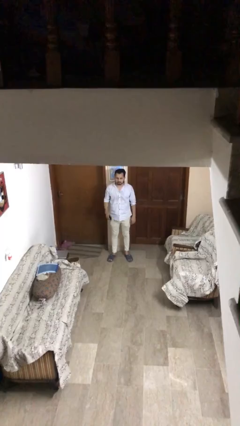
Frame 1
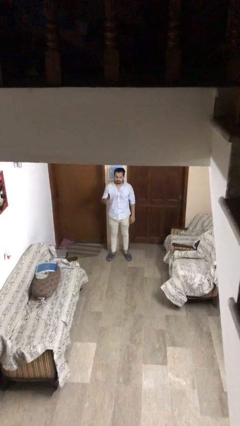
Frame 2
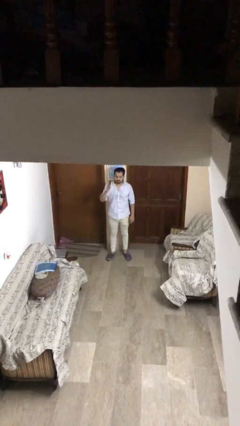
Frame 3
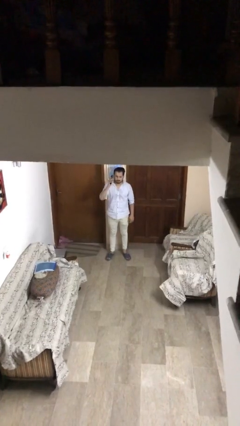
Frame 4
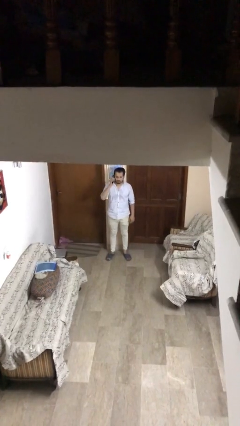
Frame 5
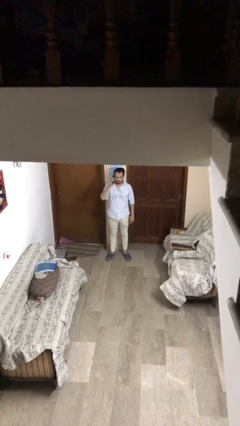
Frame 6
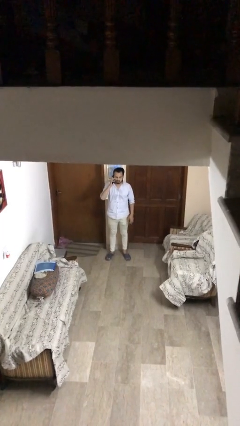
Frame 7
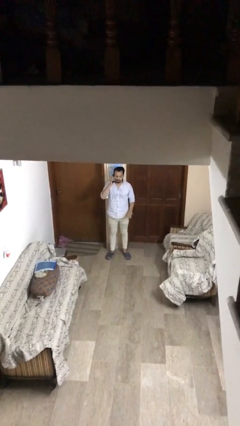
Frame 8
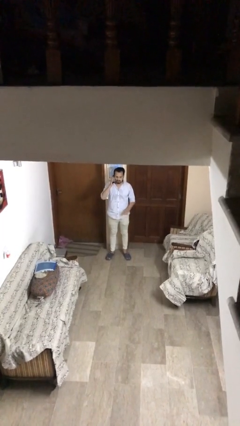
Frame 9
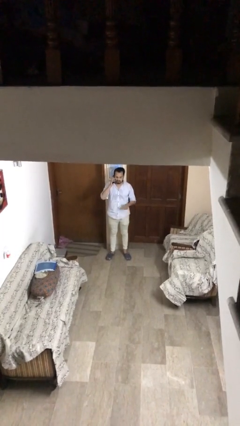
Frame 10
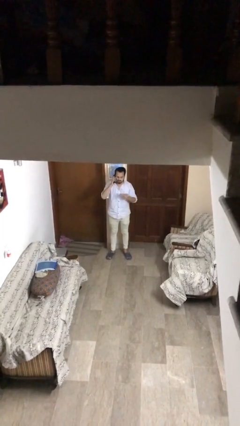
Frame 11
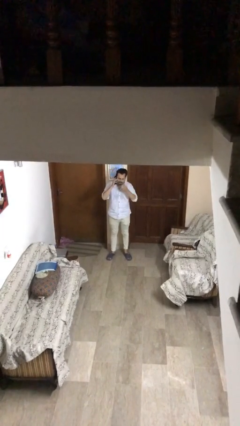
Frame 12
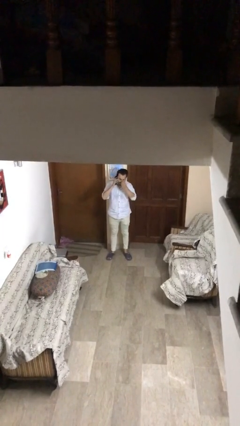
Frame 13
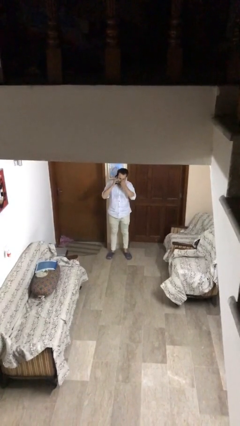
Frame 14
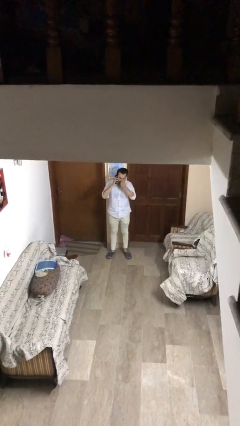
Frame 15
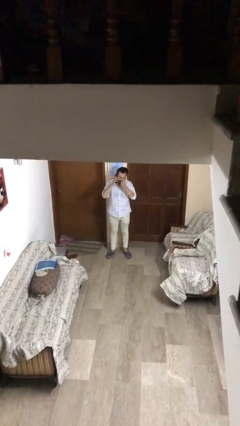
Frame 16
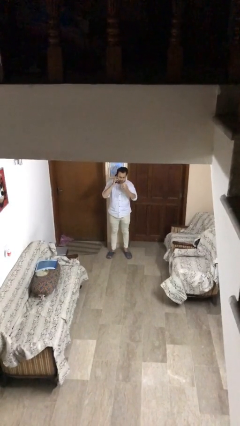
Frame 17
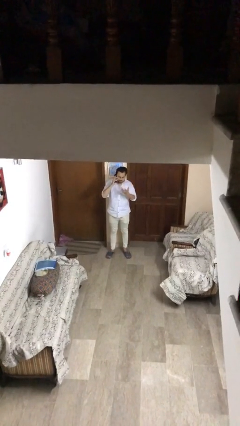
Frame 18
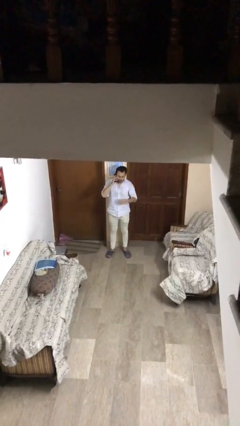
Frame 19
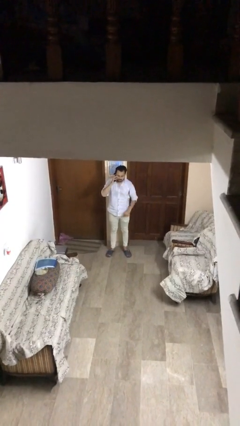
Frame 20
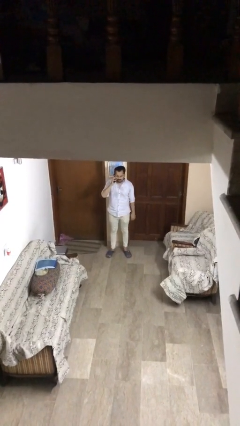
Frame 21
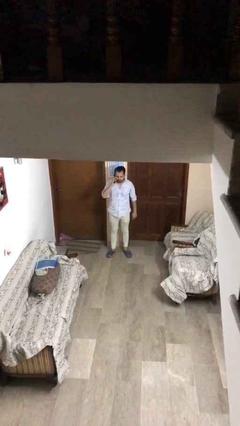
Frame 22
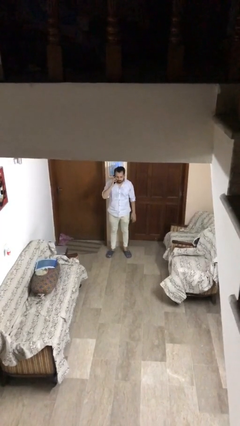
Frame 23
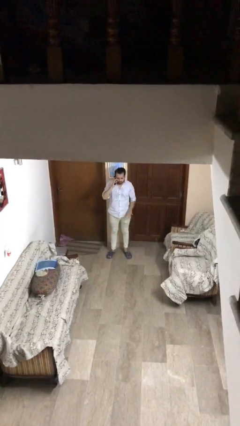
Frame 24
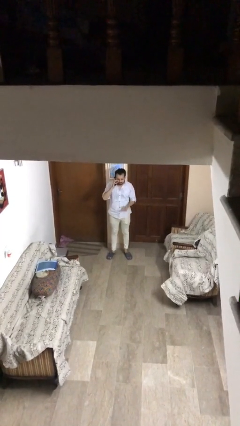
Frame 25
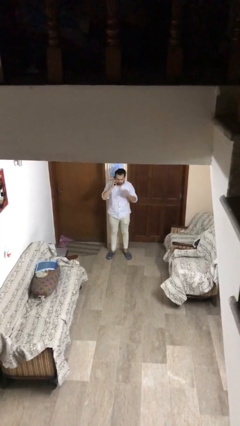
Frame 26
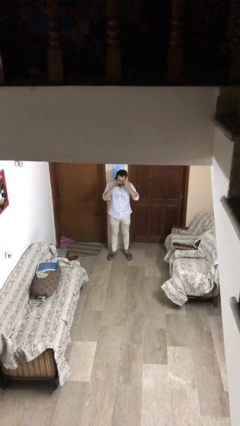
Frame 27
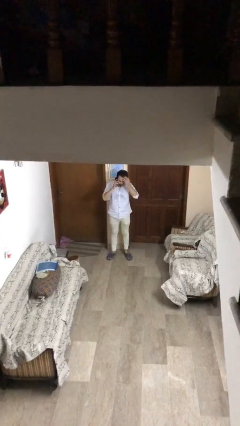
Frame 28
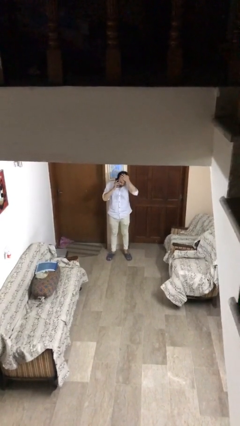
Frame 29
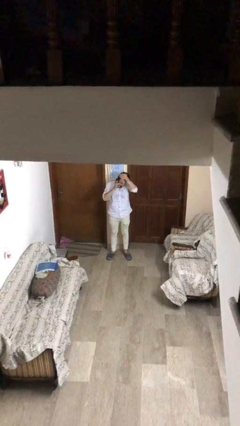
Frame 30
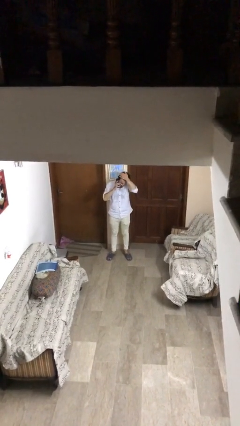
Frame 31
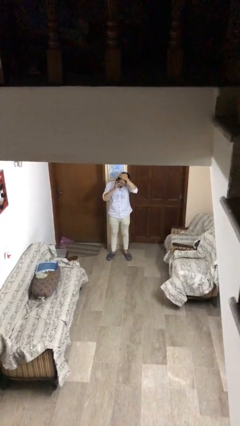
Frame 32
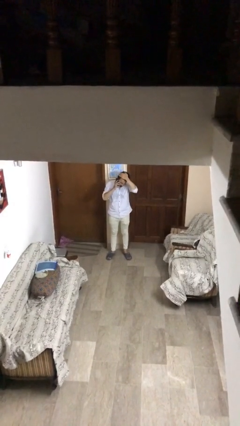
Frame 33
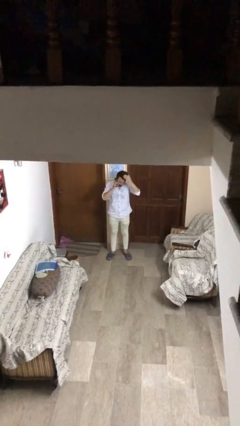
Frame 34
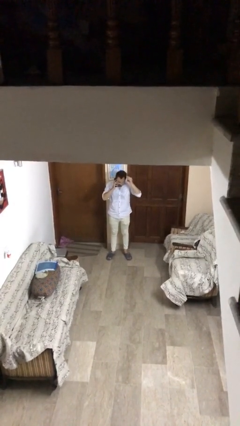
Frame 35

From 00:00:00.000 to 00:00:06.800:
person talks on phone

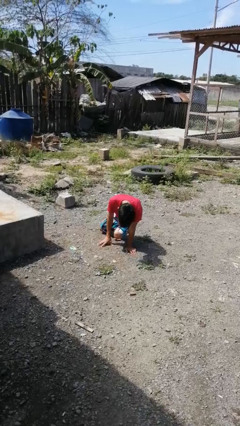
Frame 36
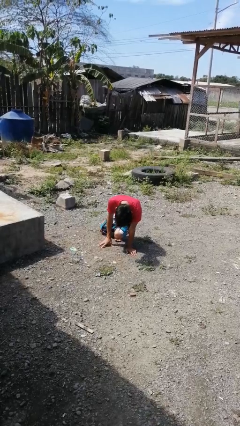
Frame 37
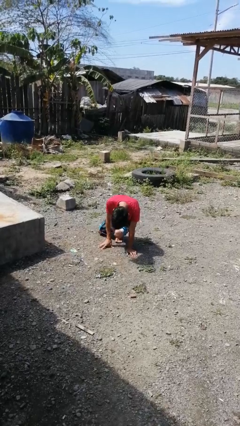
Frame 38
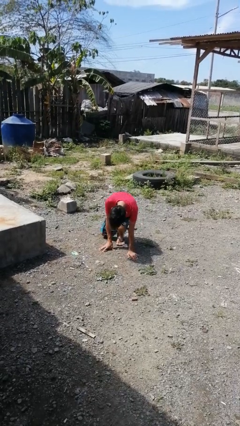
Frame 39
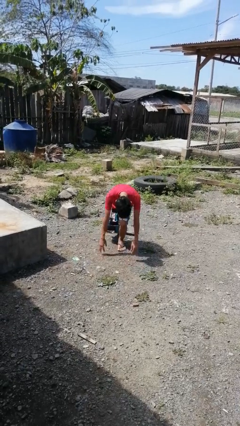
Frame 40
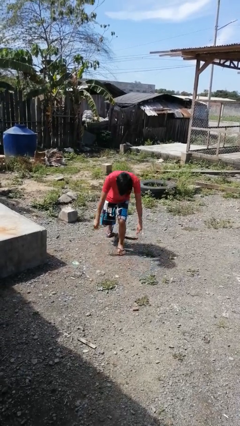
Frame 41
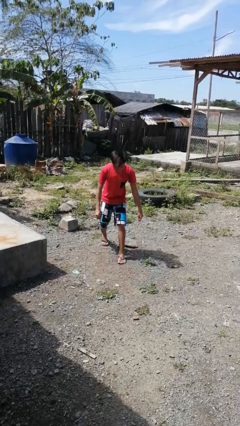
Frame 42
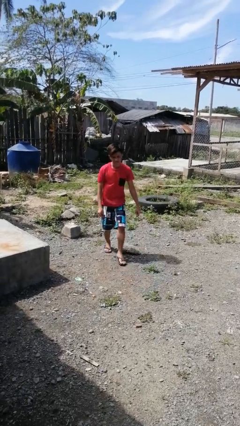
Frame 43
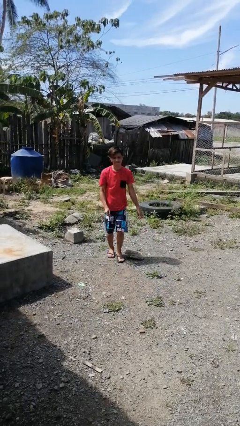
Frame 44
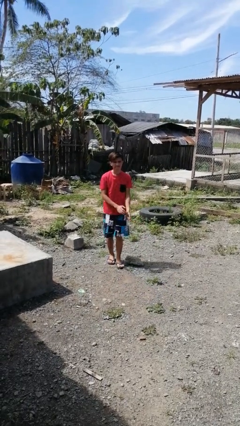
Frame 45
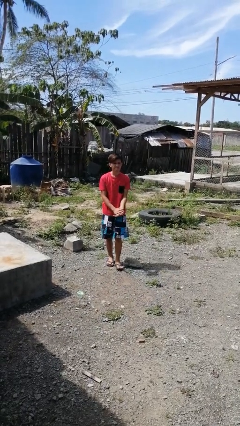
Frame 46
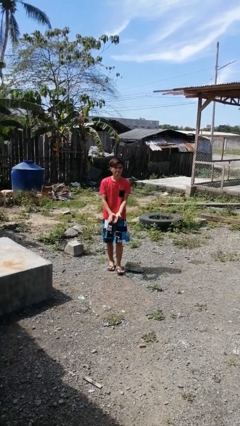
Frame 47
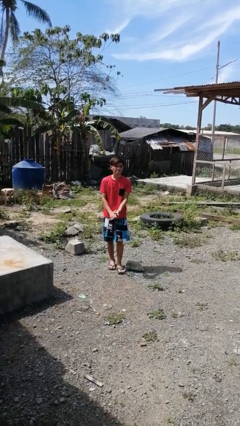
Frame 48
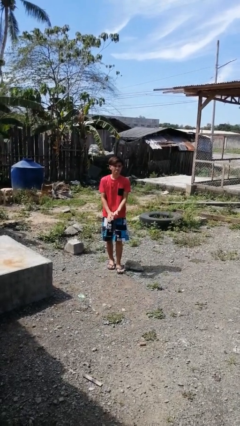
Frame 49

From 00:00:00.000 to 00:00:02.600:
person stands up from floor

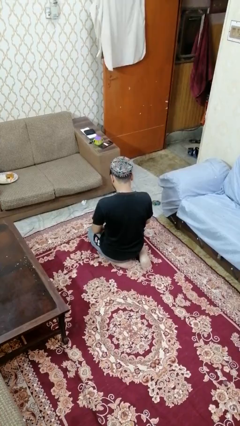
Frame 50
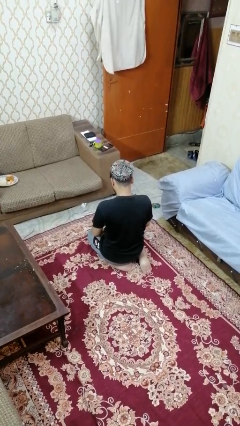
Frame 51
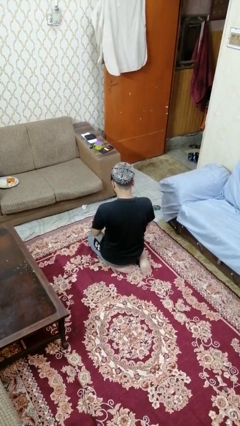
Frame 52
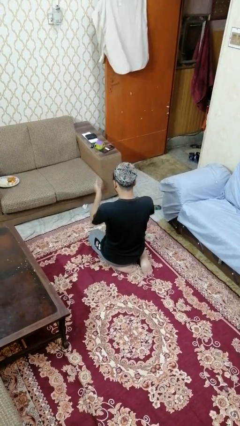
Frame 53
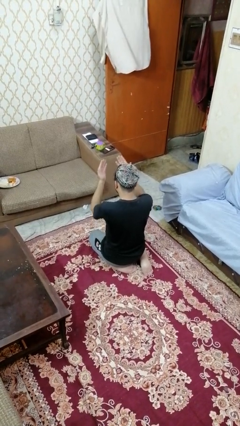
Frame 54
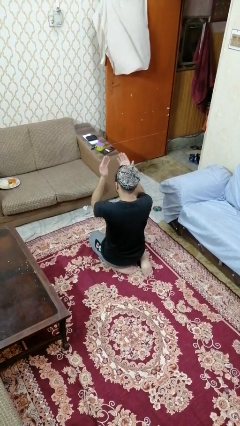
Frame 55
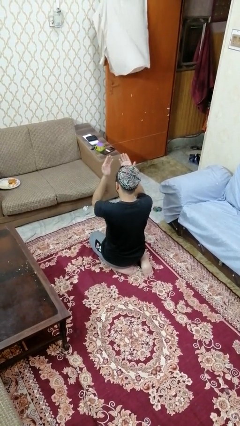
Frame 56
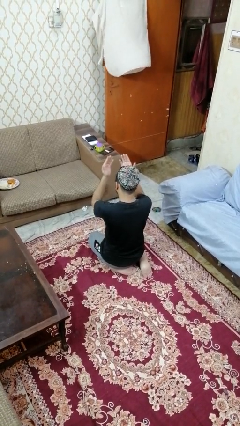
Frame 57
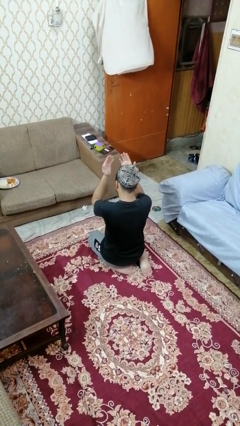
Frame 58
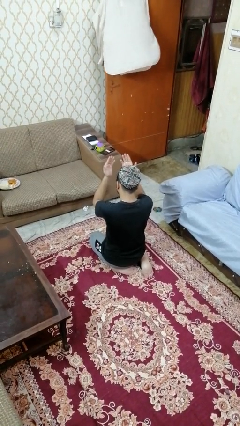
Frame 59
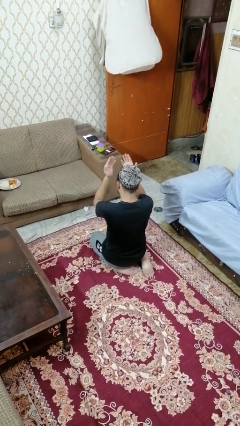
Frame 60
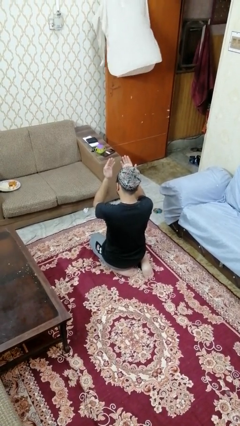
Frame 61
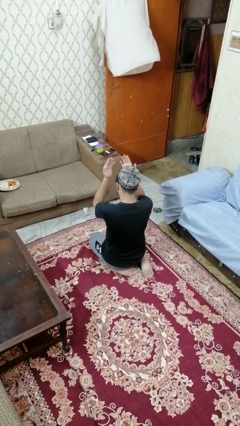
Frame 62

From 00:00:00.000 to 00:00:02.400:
person prays

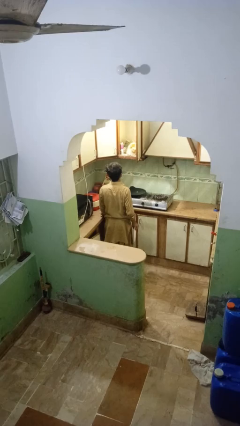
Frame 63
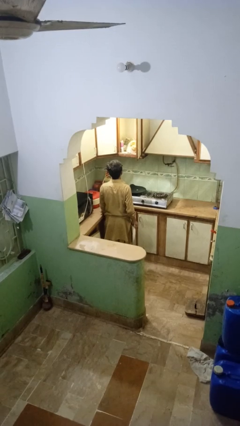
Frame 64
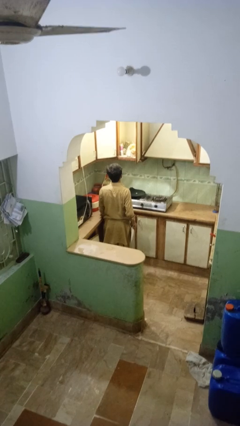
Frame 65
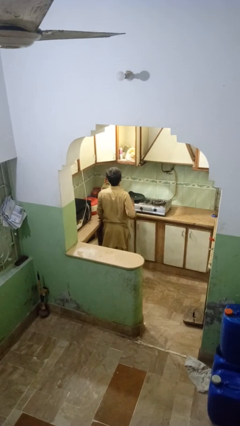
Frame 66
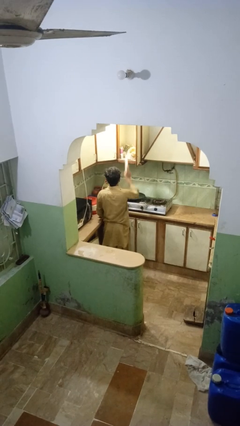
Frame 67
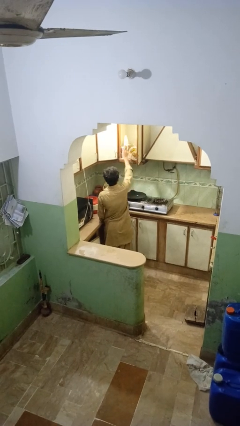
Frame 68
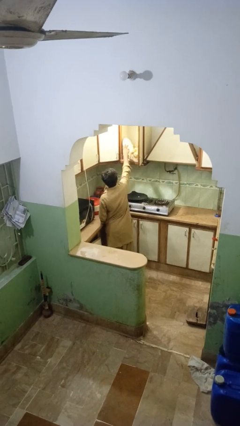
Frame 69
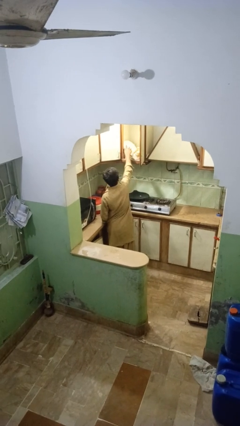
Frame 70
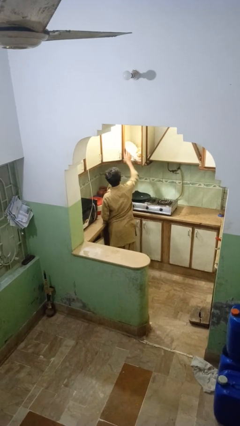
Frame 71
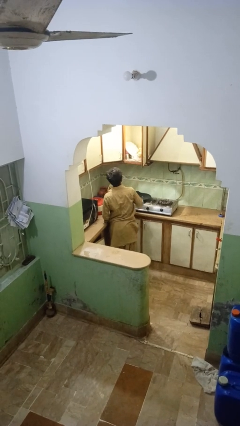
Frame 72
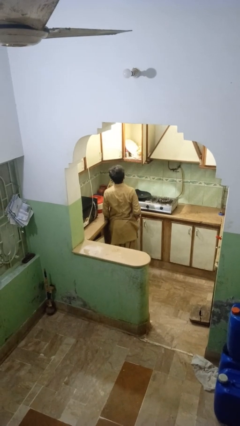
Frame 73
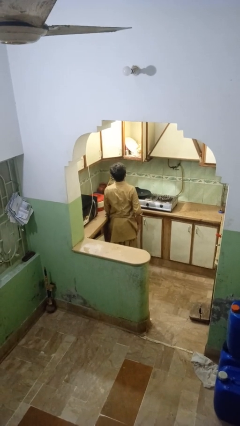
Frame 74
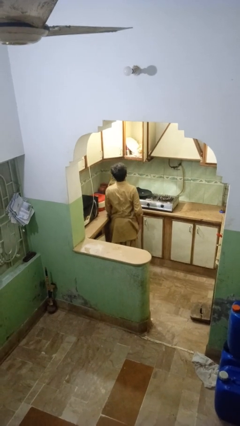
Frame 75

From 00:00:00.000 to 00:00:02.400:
person puts object in cabinet

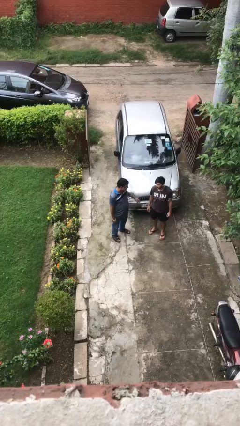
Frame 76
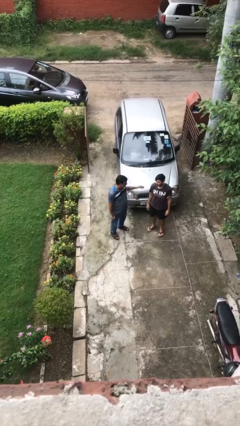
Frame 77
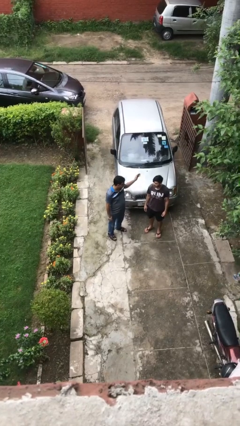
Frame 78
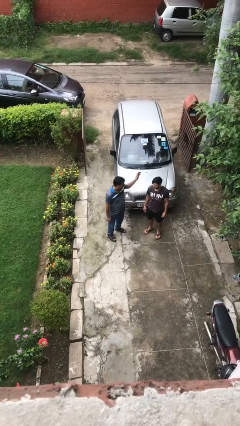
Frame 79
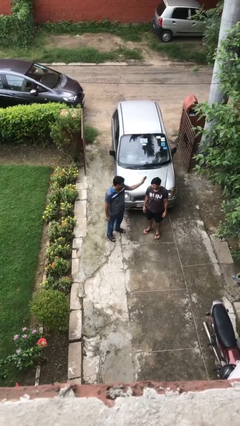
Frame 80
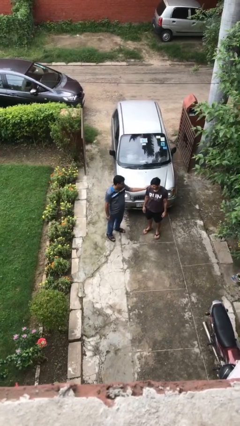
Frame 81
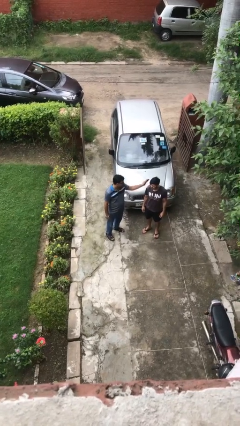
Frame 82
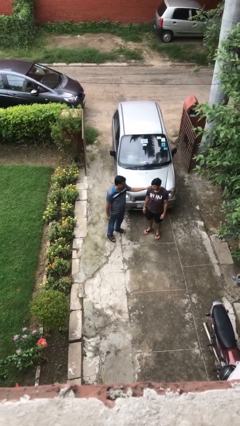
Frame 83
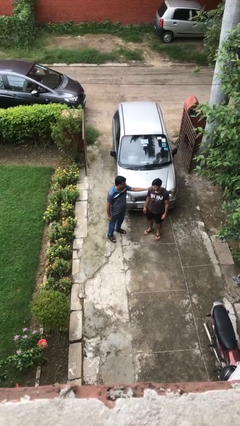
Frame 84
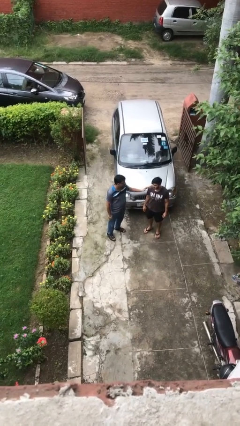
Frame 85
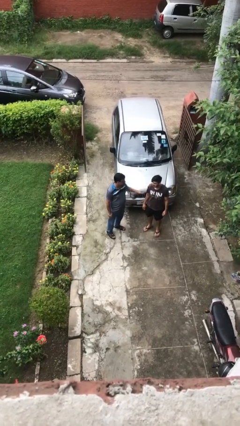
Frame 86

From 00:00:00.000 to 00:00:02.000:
person pounds shoulders of person

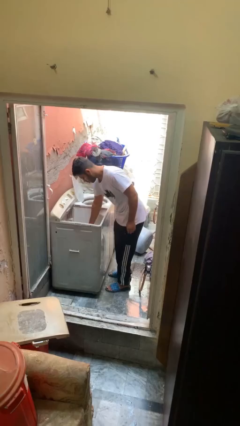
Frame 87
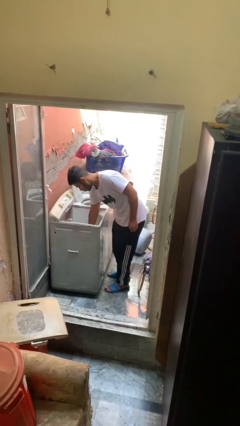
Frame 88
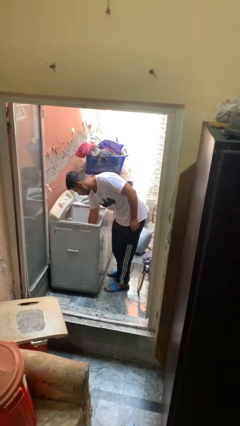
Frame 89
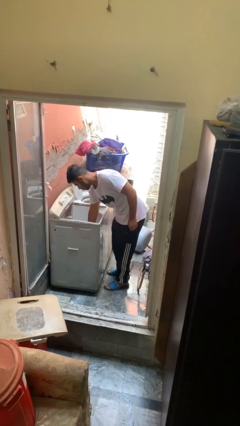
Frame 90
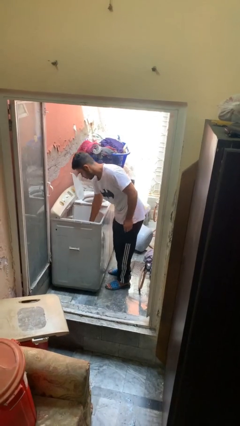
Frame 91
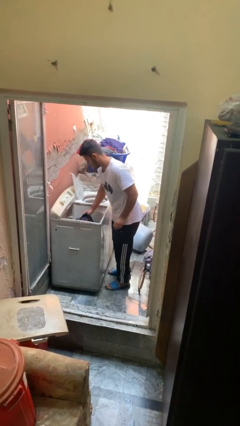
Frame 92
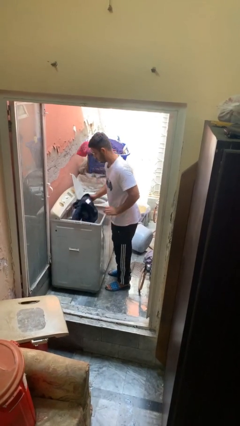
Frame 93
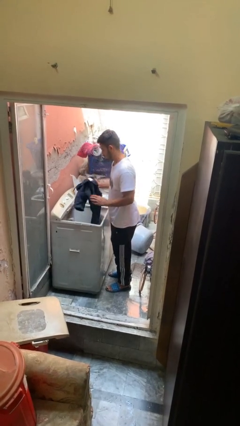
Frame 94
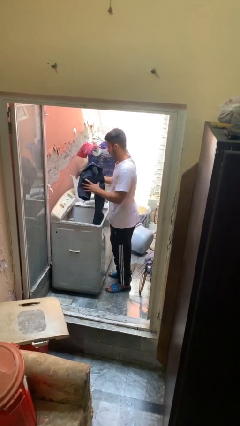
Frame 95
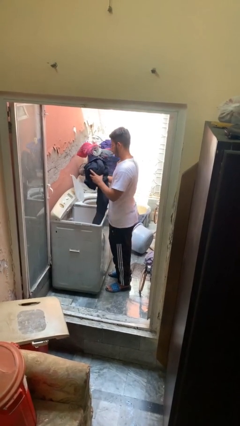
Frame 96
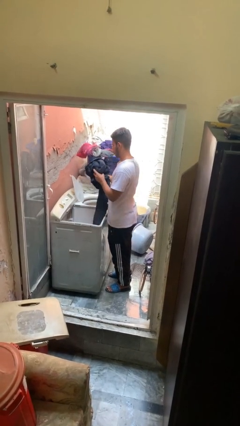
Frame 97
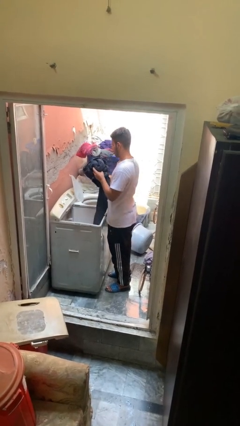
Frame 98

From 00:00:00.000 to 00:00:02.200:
person unloads clotheswasher
